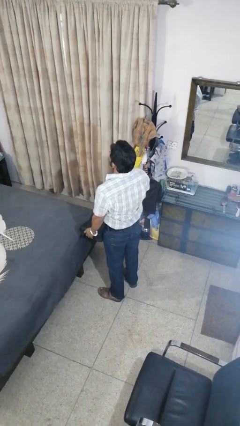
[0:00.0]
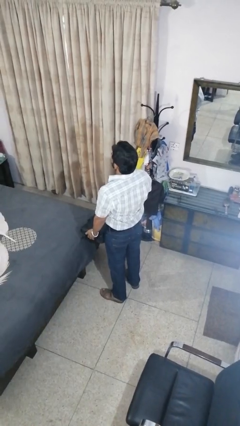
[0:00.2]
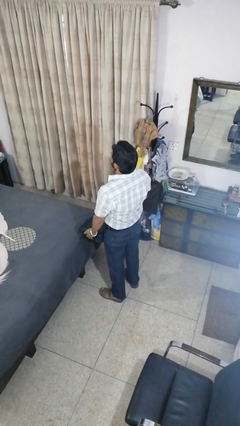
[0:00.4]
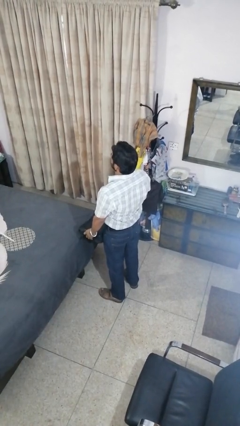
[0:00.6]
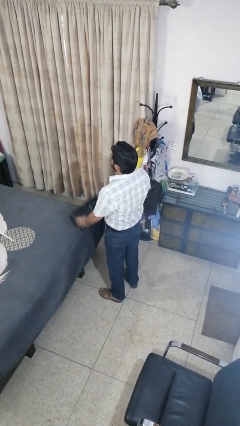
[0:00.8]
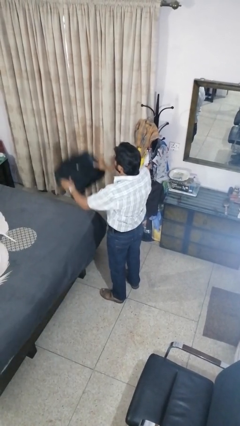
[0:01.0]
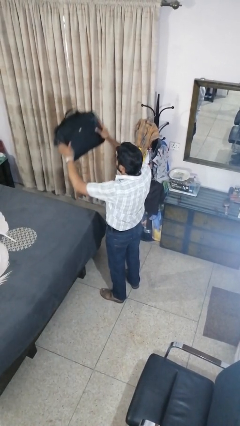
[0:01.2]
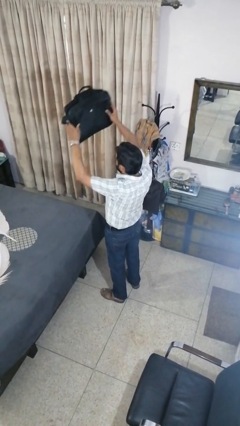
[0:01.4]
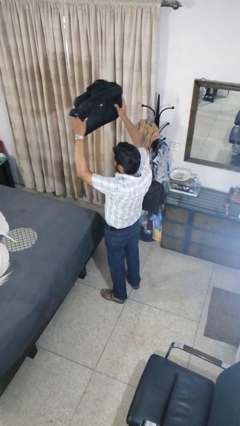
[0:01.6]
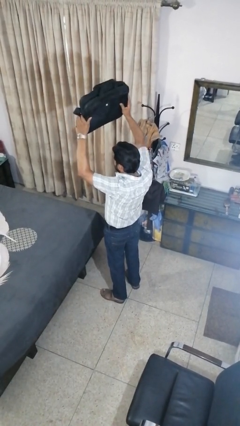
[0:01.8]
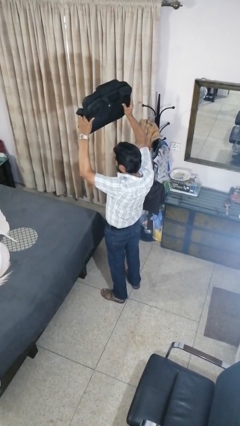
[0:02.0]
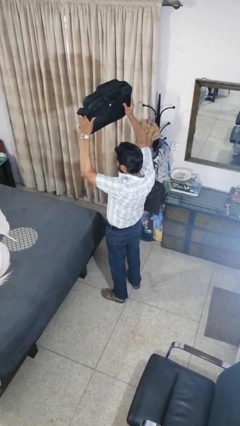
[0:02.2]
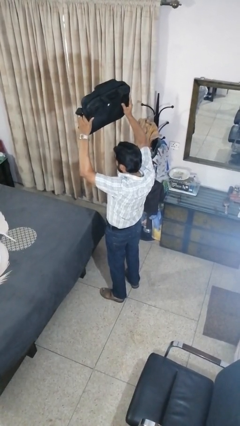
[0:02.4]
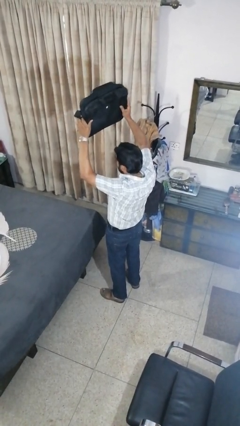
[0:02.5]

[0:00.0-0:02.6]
person holds object above head

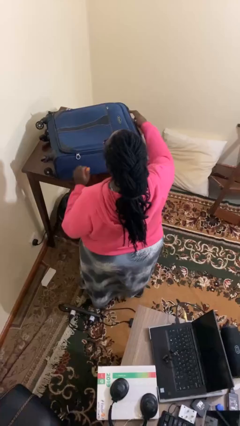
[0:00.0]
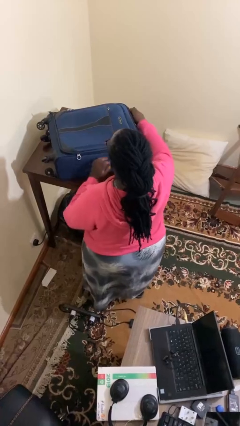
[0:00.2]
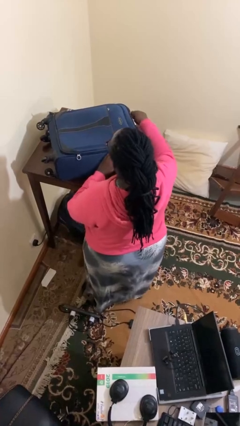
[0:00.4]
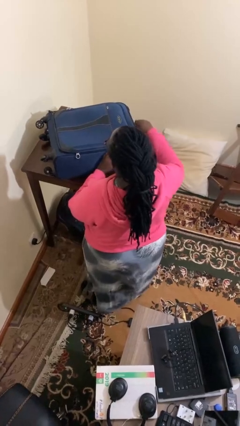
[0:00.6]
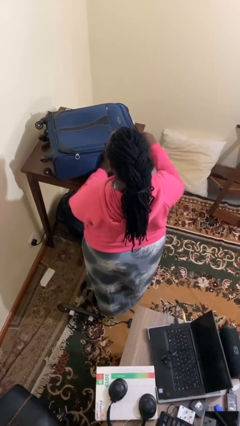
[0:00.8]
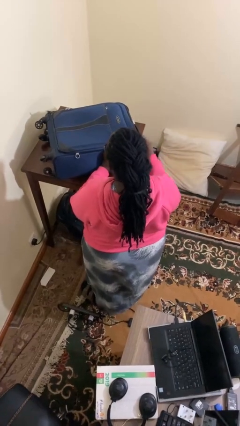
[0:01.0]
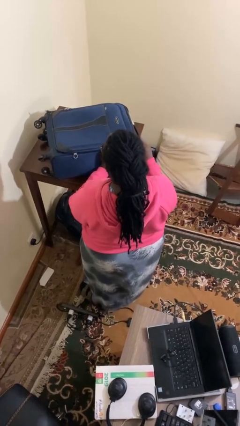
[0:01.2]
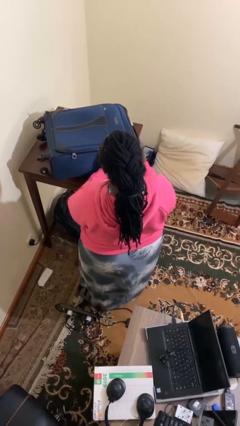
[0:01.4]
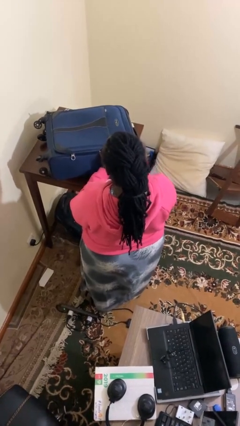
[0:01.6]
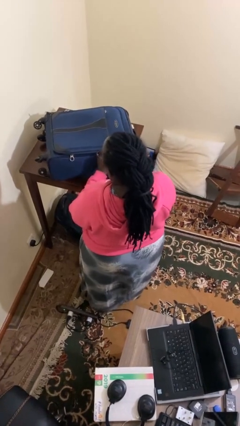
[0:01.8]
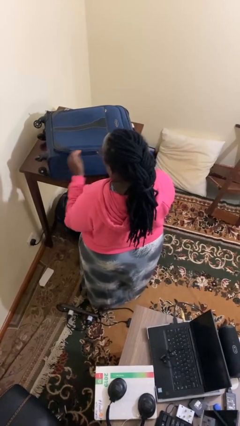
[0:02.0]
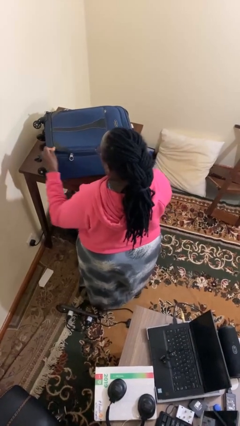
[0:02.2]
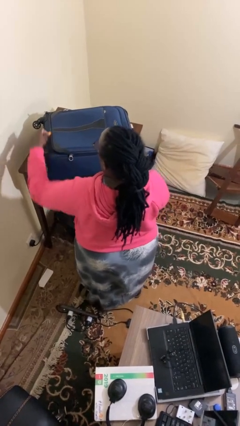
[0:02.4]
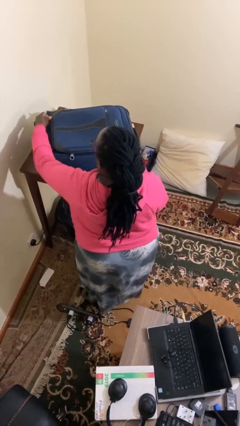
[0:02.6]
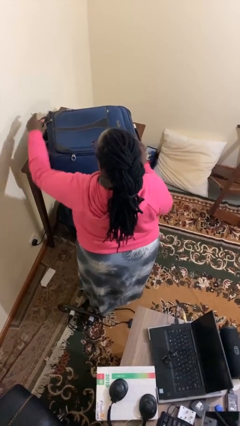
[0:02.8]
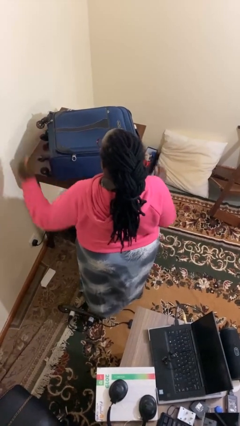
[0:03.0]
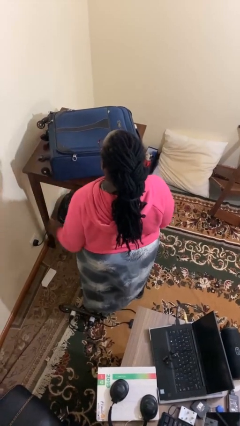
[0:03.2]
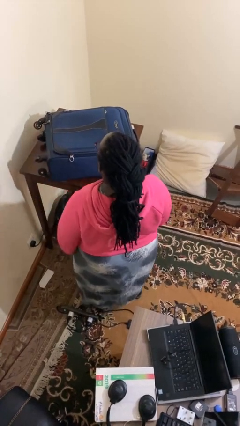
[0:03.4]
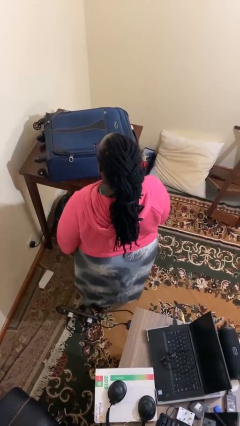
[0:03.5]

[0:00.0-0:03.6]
person puts object into kitchen drawer

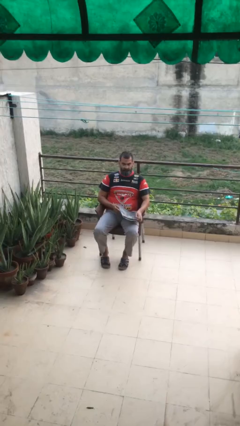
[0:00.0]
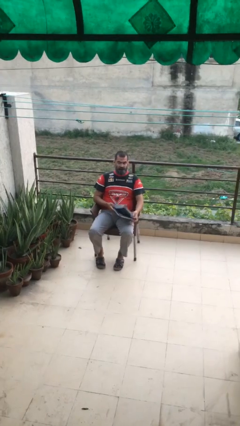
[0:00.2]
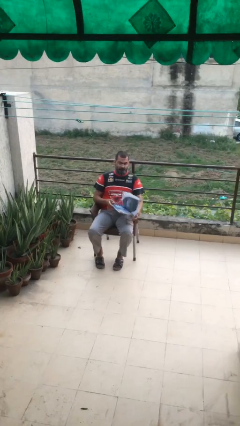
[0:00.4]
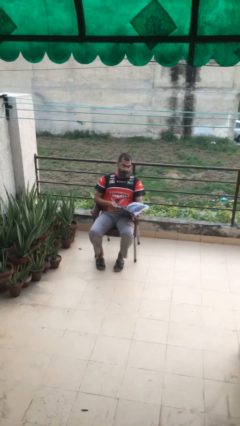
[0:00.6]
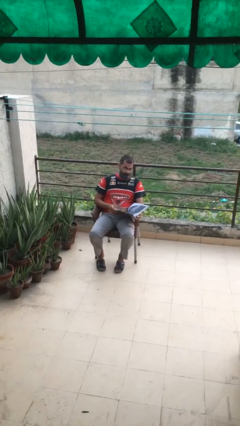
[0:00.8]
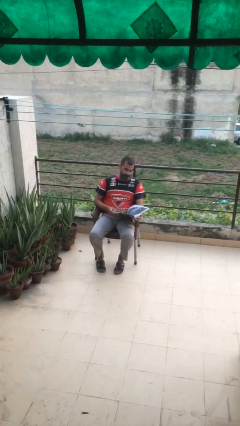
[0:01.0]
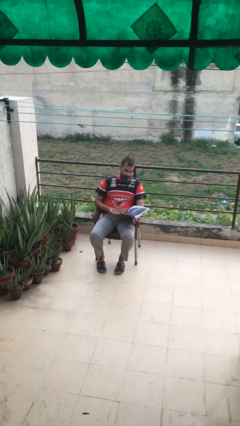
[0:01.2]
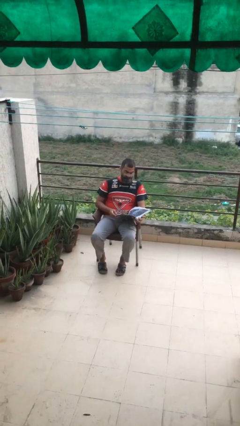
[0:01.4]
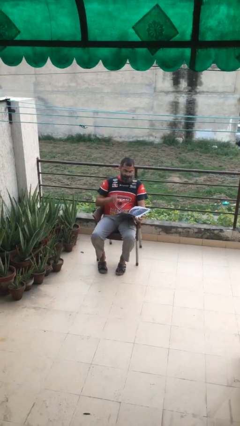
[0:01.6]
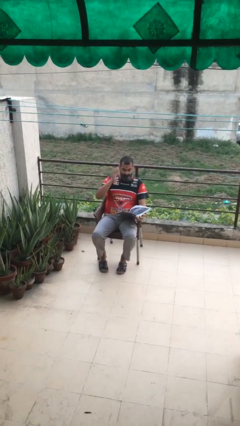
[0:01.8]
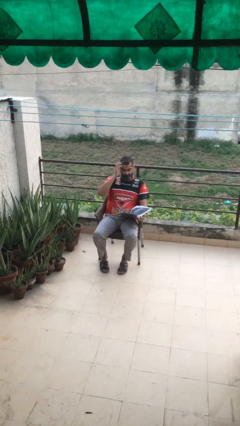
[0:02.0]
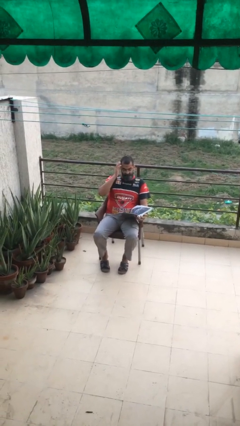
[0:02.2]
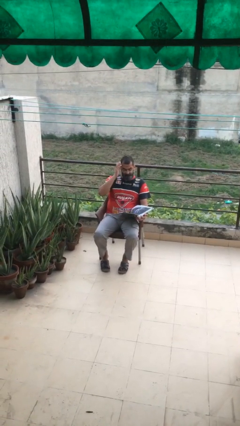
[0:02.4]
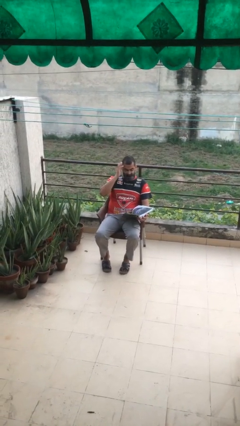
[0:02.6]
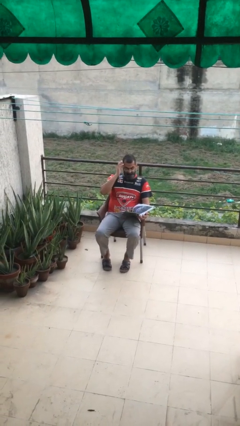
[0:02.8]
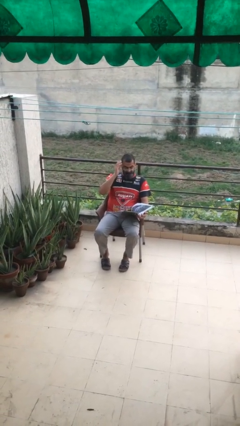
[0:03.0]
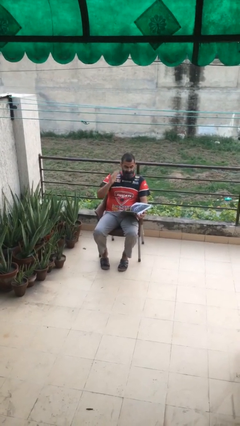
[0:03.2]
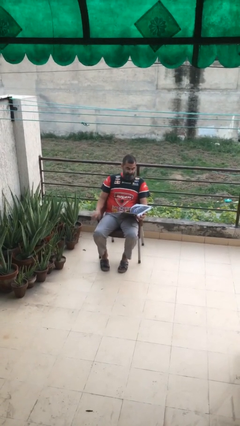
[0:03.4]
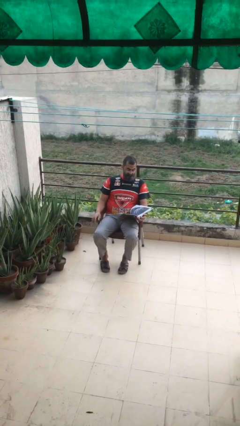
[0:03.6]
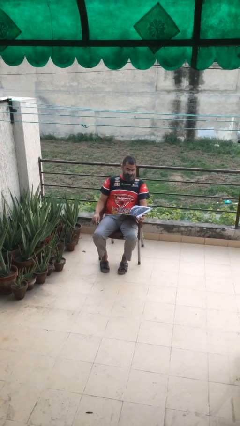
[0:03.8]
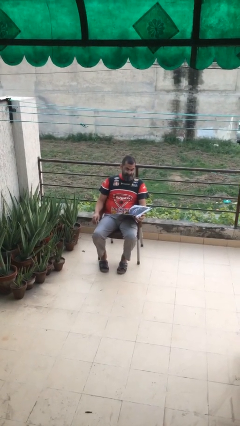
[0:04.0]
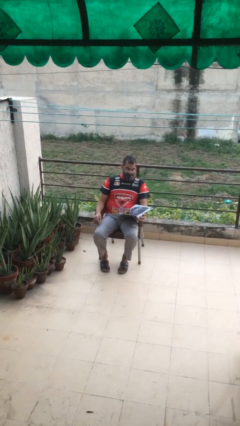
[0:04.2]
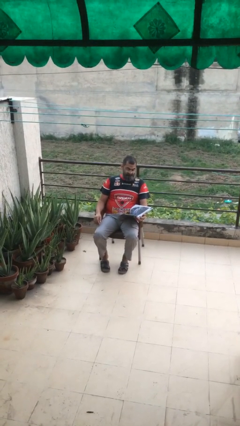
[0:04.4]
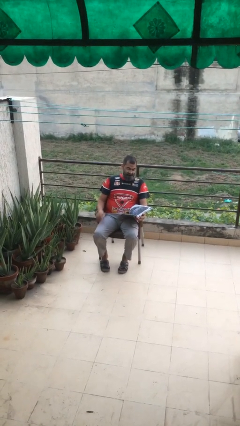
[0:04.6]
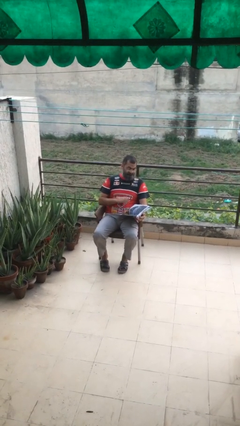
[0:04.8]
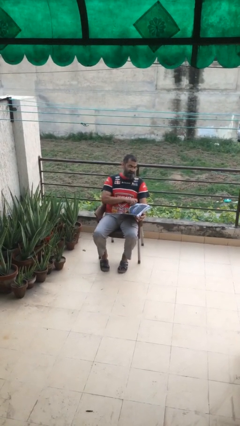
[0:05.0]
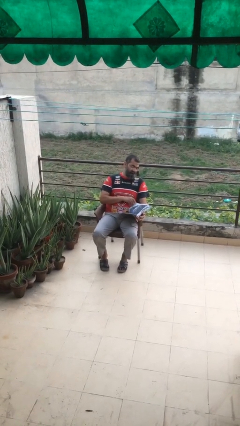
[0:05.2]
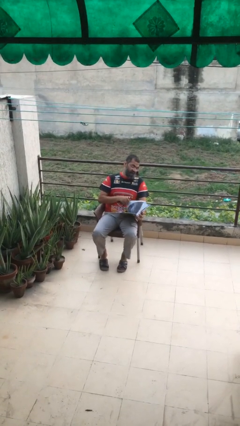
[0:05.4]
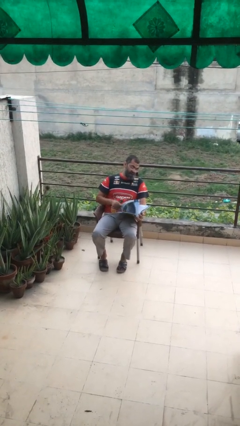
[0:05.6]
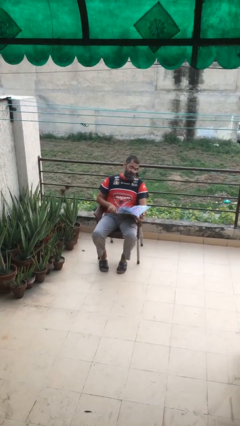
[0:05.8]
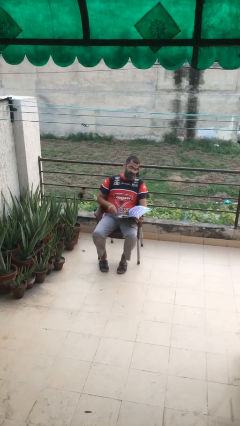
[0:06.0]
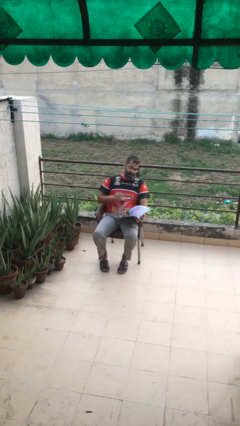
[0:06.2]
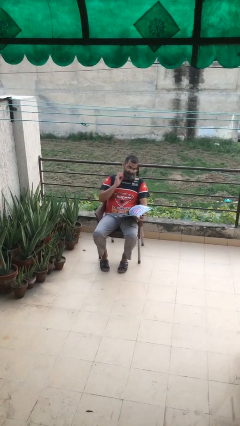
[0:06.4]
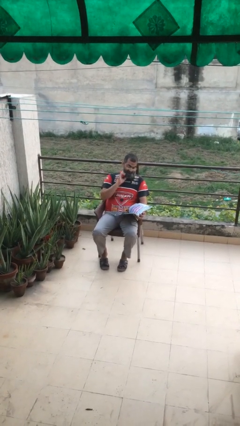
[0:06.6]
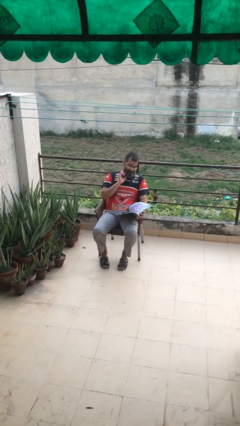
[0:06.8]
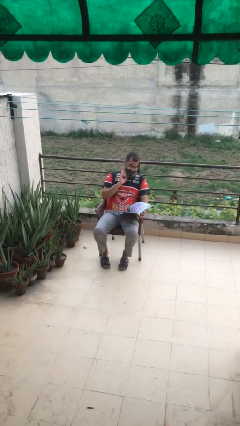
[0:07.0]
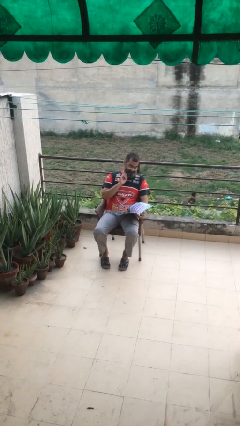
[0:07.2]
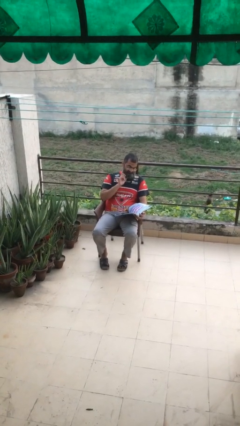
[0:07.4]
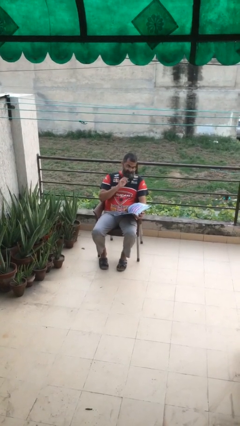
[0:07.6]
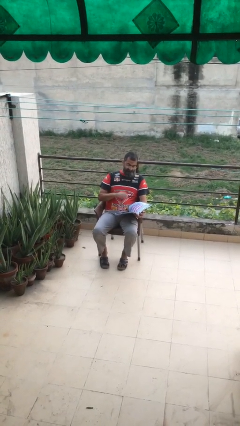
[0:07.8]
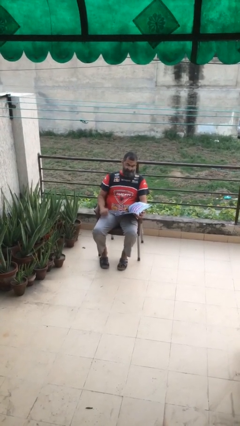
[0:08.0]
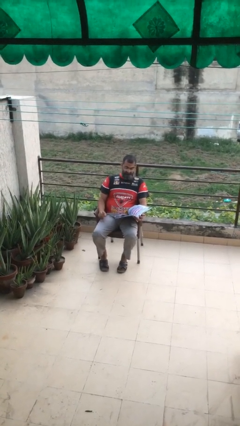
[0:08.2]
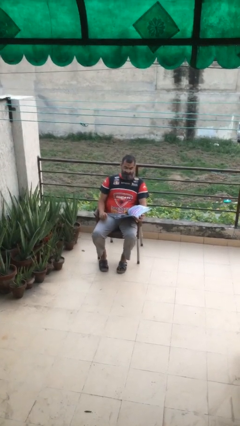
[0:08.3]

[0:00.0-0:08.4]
person reads document

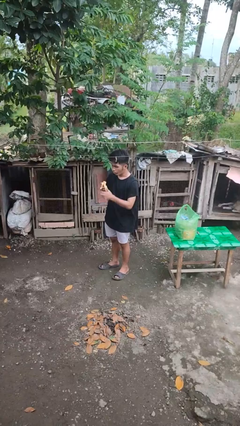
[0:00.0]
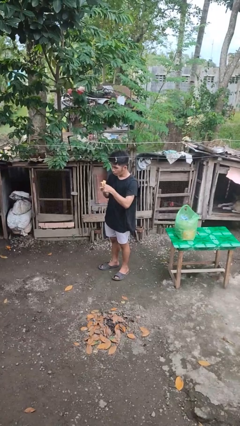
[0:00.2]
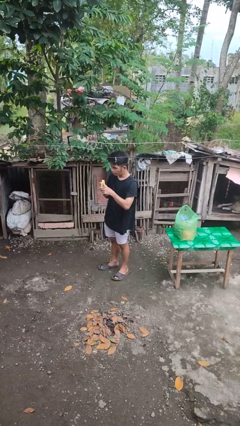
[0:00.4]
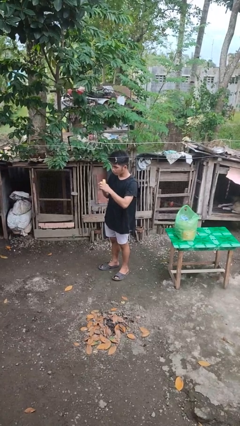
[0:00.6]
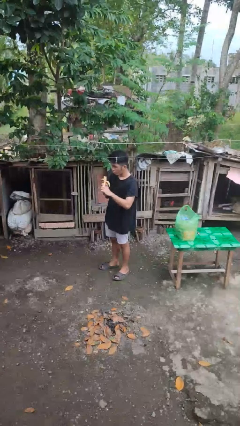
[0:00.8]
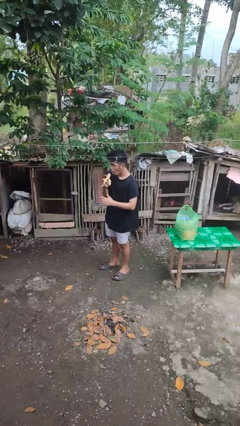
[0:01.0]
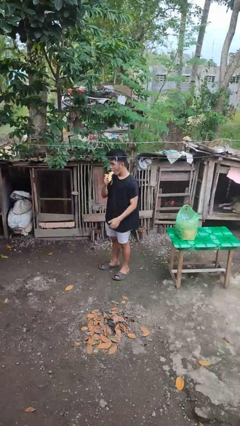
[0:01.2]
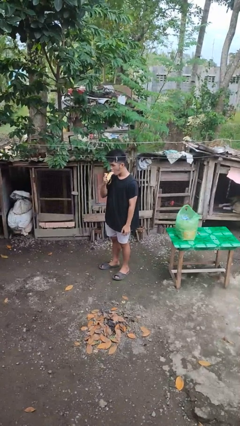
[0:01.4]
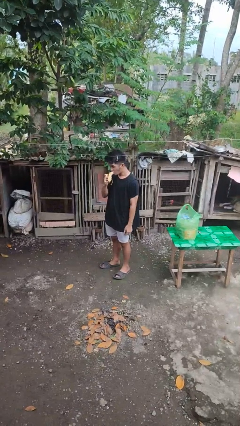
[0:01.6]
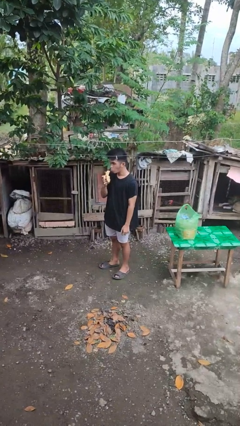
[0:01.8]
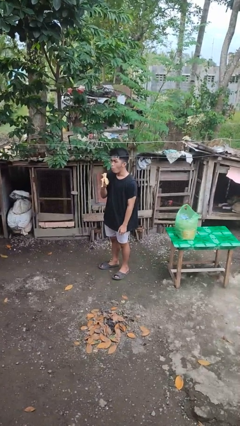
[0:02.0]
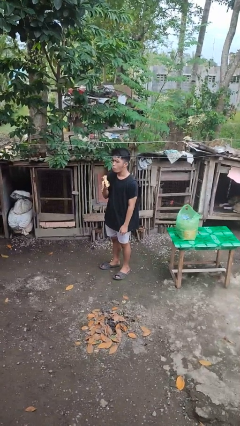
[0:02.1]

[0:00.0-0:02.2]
person eats banana

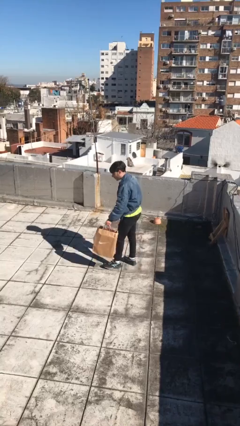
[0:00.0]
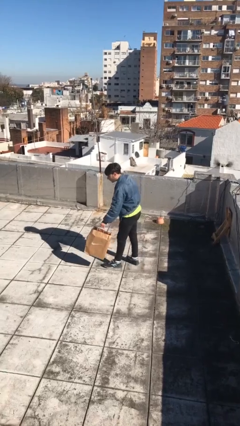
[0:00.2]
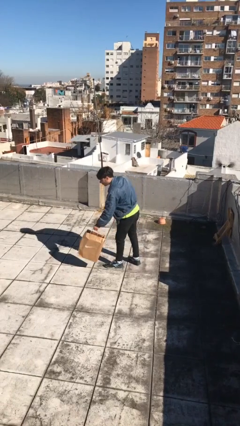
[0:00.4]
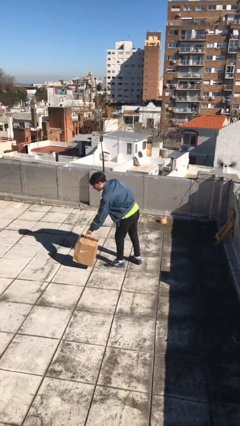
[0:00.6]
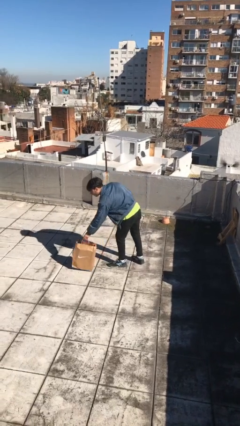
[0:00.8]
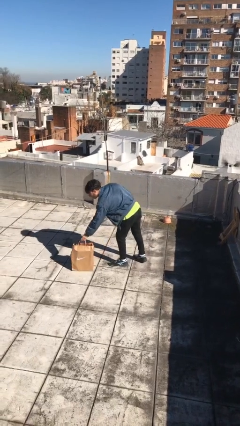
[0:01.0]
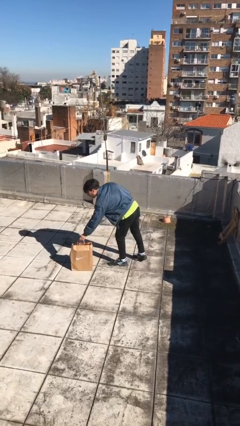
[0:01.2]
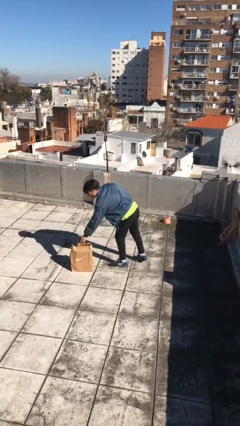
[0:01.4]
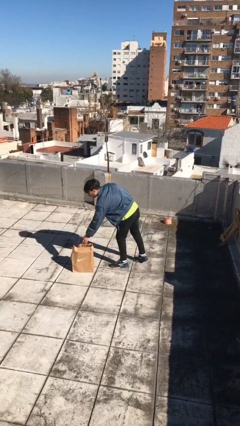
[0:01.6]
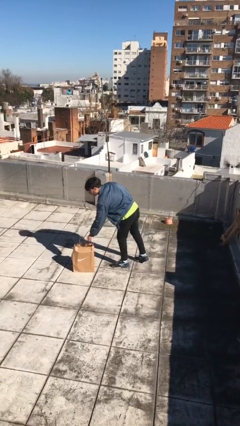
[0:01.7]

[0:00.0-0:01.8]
person puts down object on floor
